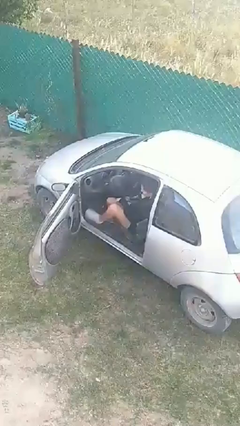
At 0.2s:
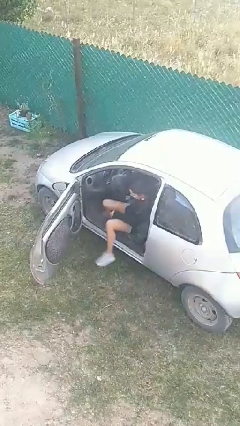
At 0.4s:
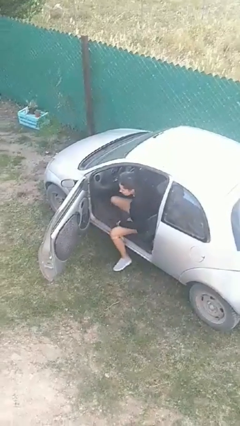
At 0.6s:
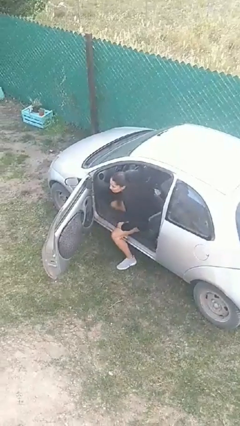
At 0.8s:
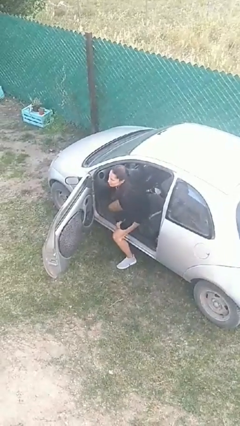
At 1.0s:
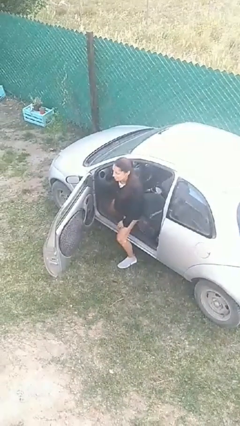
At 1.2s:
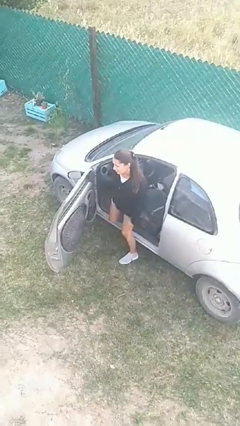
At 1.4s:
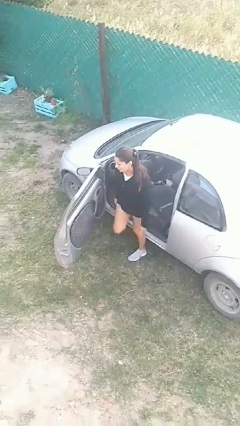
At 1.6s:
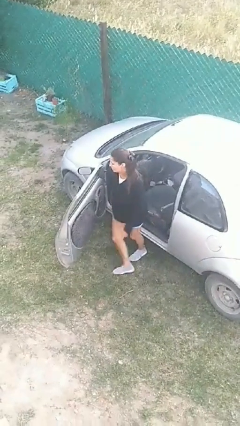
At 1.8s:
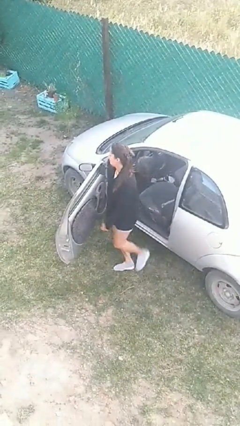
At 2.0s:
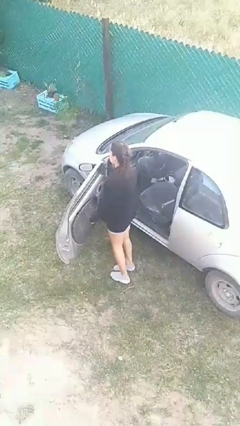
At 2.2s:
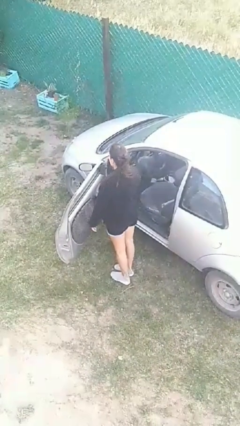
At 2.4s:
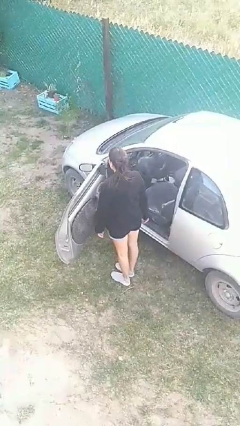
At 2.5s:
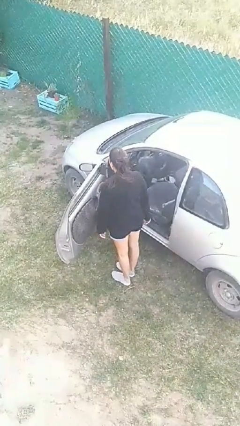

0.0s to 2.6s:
person exits car

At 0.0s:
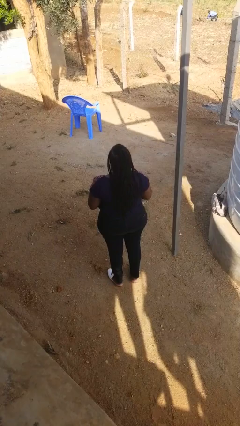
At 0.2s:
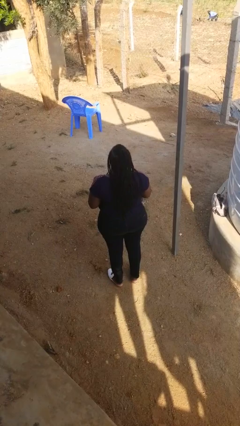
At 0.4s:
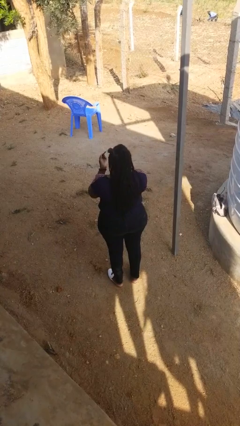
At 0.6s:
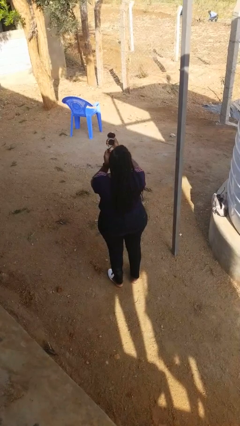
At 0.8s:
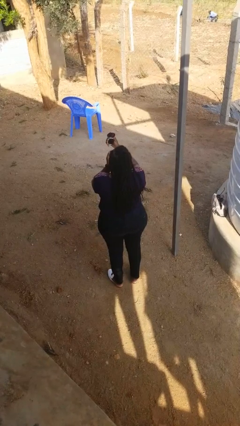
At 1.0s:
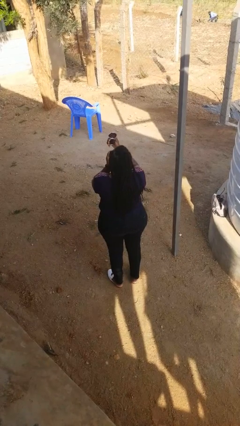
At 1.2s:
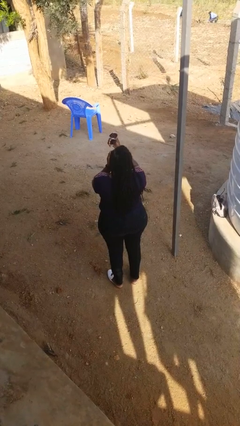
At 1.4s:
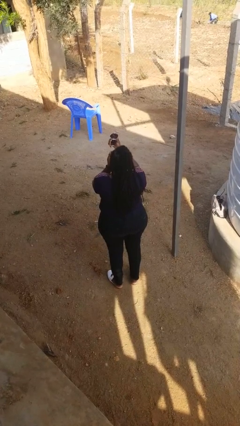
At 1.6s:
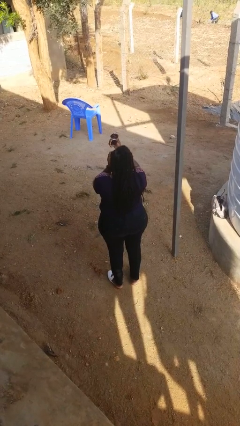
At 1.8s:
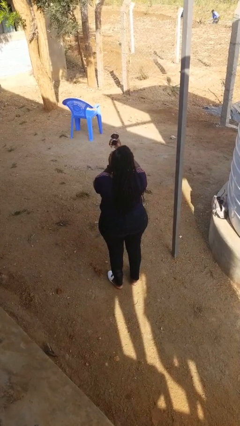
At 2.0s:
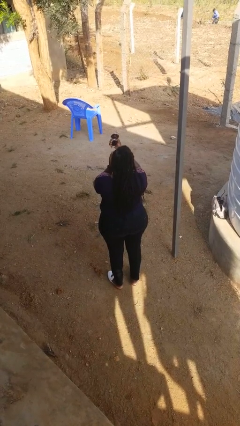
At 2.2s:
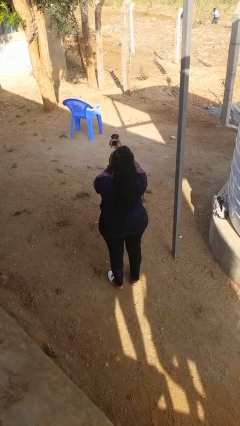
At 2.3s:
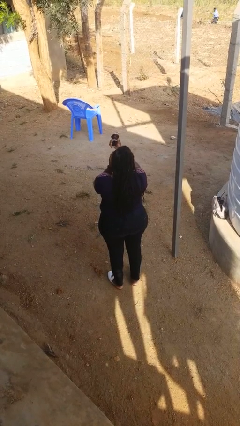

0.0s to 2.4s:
person applies eye makeup

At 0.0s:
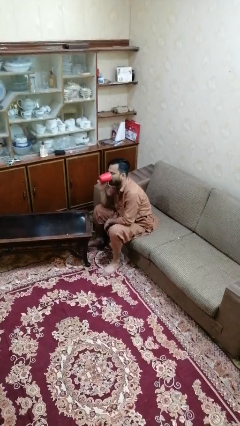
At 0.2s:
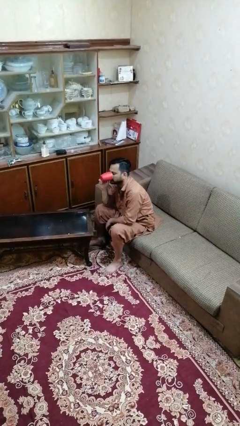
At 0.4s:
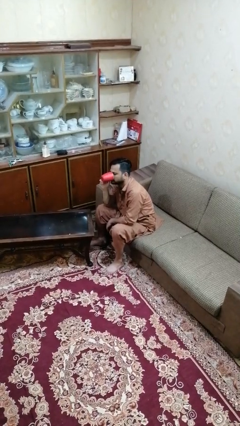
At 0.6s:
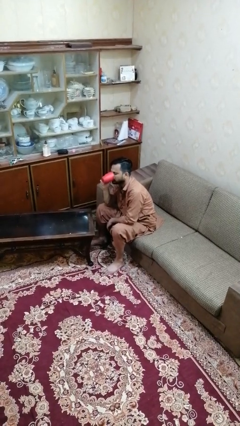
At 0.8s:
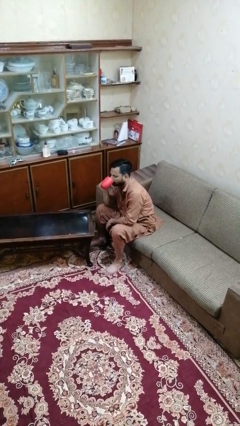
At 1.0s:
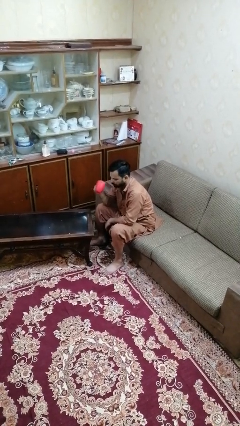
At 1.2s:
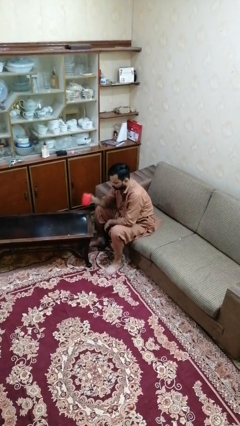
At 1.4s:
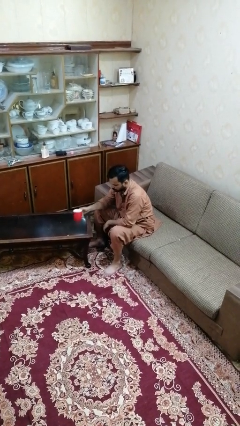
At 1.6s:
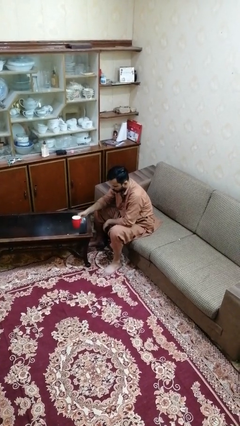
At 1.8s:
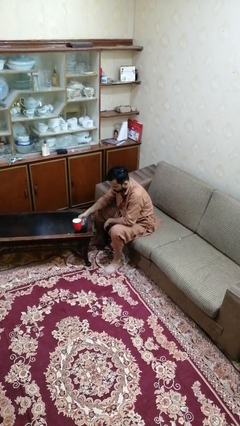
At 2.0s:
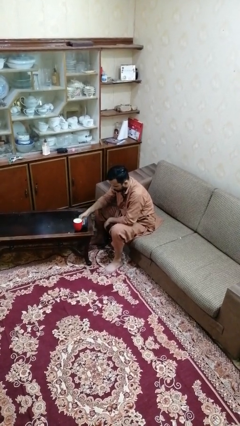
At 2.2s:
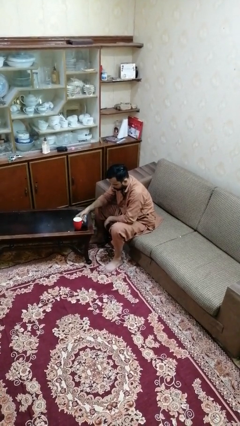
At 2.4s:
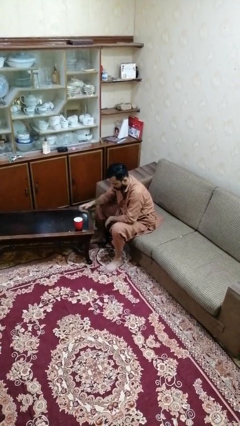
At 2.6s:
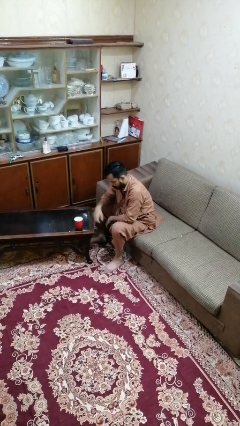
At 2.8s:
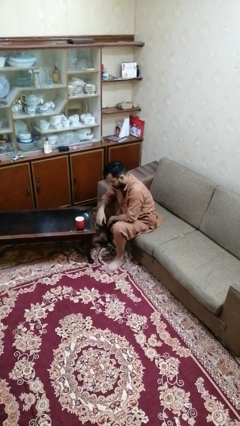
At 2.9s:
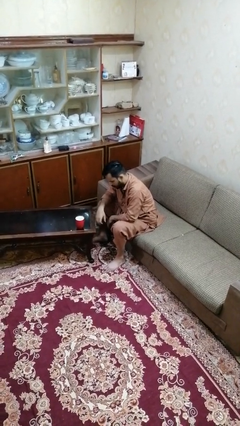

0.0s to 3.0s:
person puts down object on table

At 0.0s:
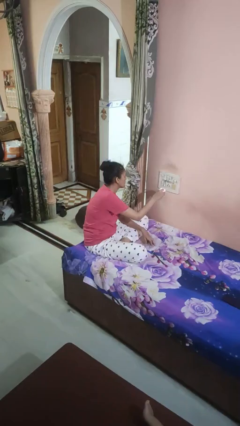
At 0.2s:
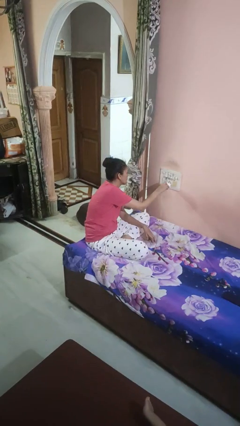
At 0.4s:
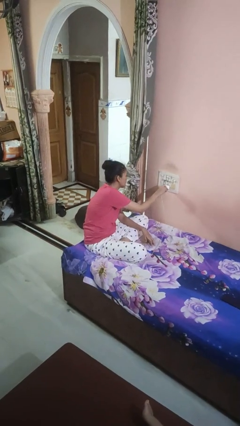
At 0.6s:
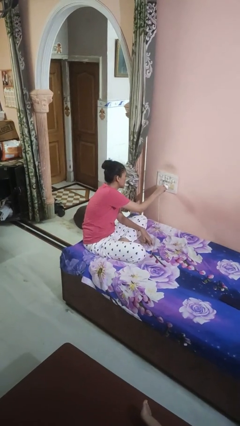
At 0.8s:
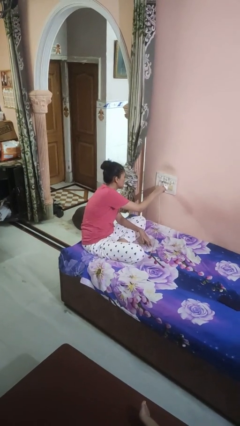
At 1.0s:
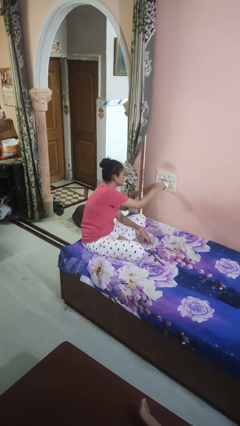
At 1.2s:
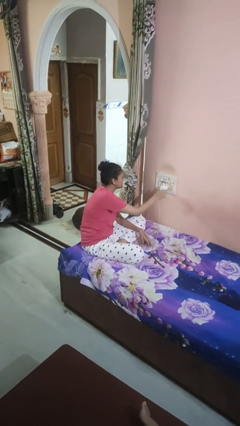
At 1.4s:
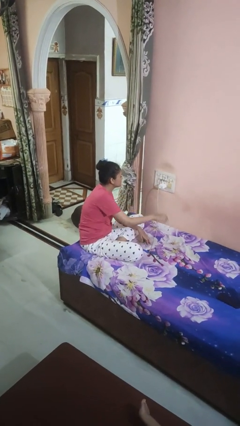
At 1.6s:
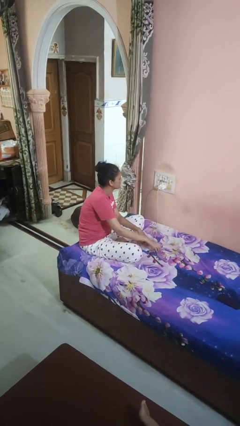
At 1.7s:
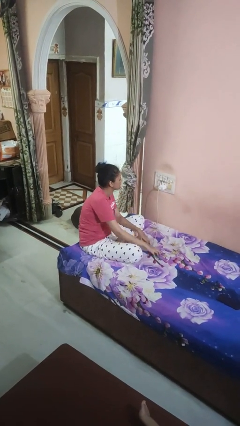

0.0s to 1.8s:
person plugs into electrical socket

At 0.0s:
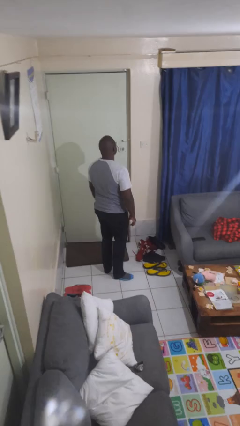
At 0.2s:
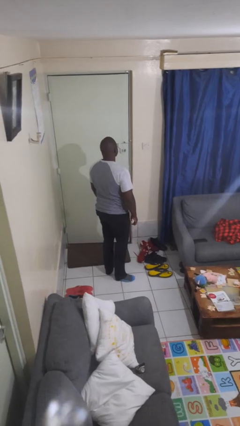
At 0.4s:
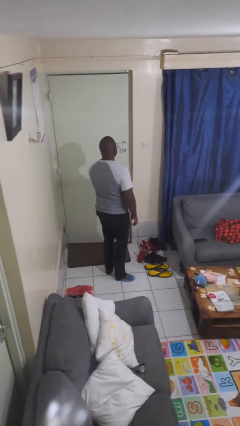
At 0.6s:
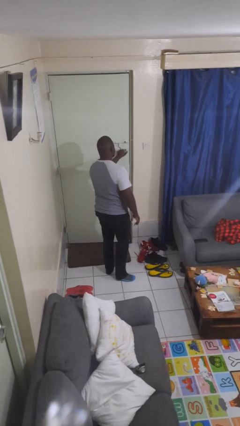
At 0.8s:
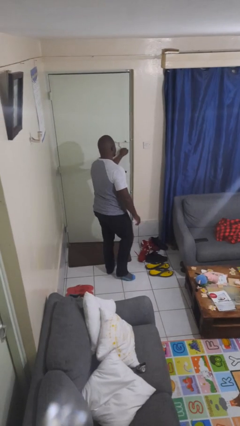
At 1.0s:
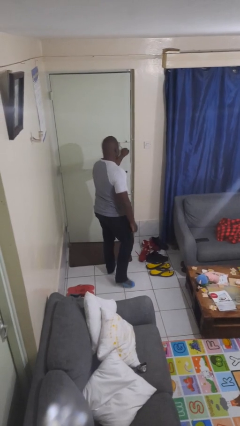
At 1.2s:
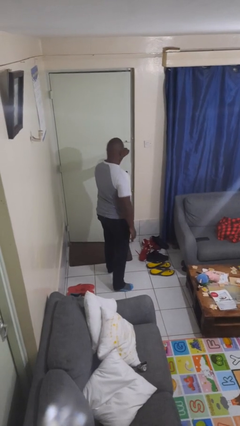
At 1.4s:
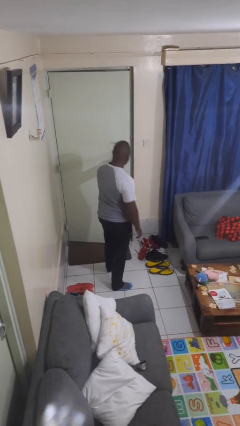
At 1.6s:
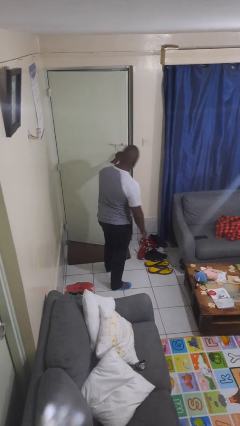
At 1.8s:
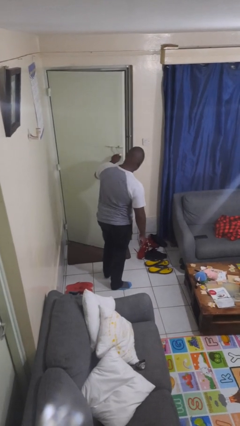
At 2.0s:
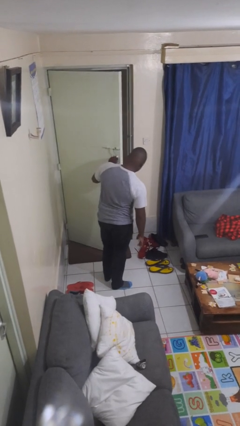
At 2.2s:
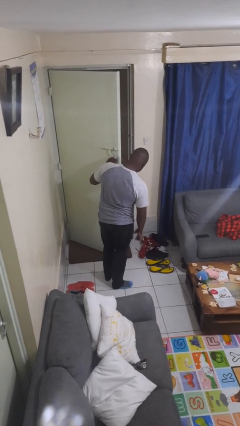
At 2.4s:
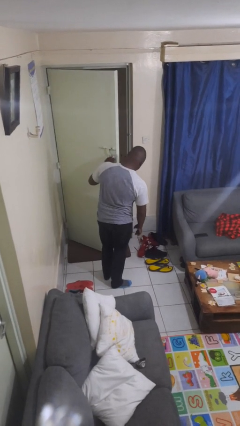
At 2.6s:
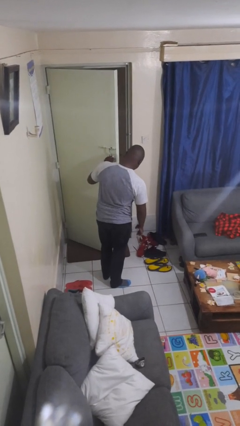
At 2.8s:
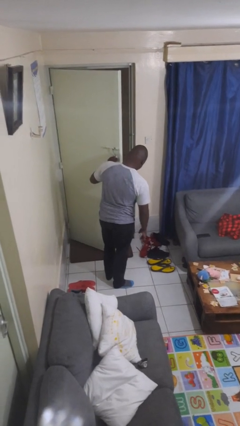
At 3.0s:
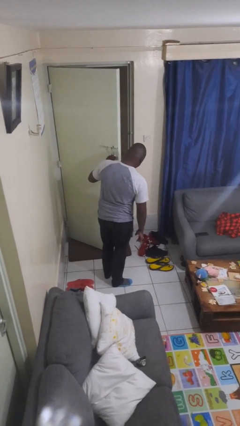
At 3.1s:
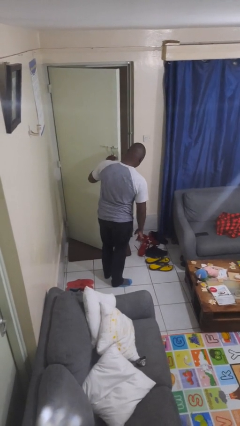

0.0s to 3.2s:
person opens facility door

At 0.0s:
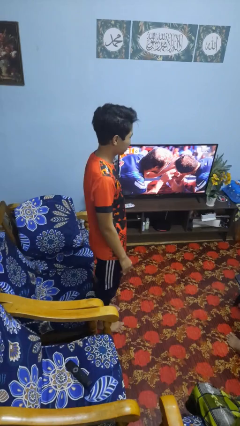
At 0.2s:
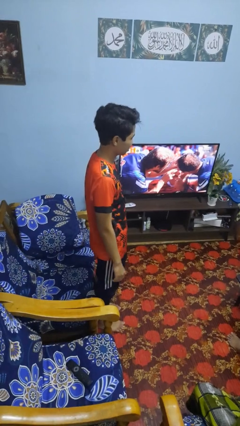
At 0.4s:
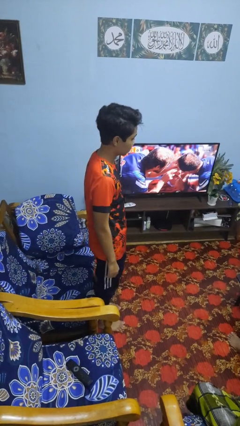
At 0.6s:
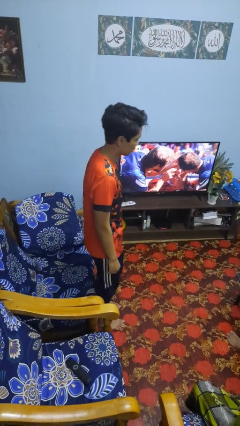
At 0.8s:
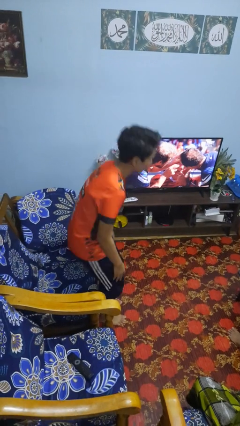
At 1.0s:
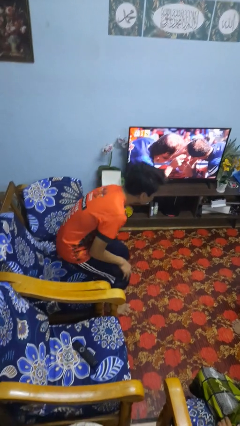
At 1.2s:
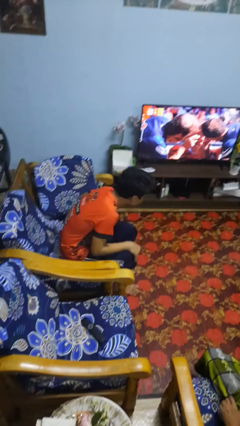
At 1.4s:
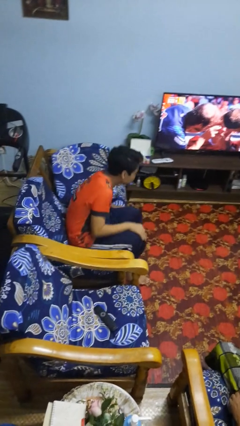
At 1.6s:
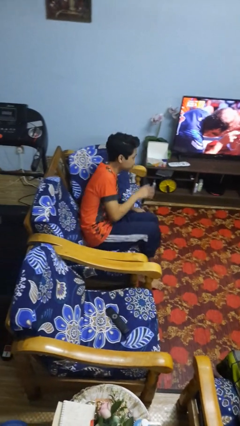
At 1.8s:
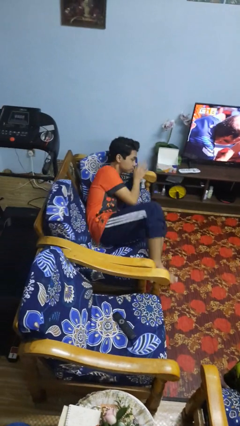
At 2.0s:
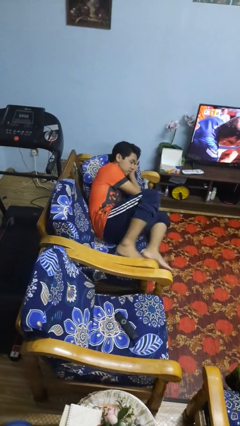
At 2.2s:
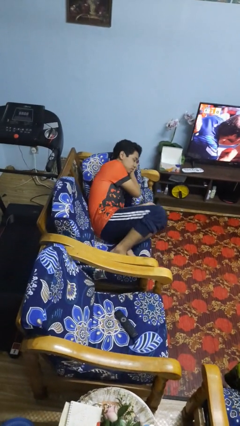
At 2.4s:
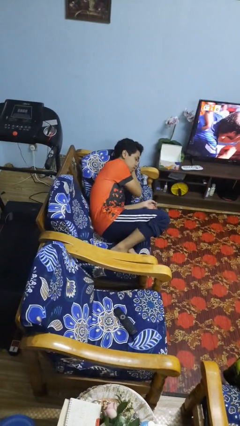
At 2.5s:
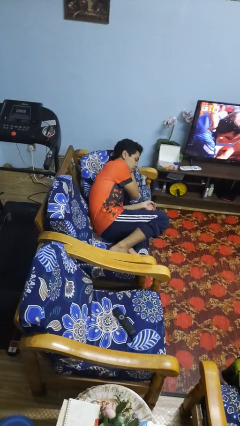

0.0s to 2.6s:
person lies down on couch

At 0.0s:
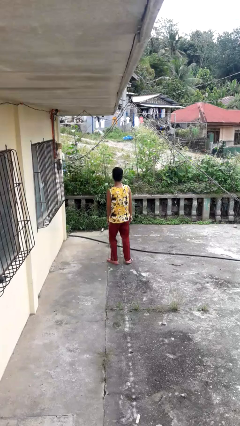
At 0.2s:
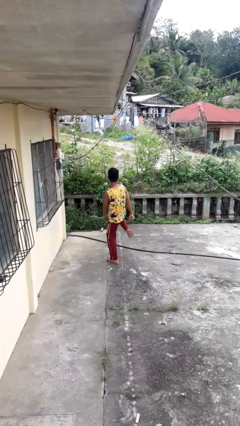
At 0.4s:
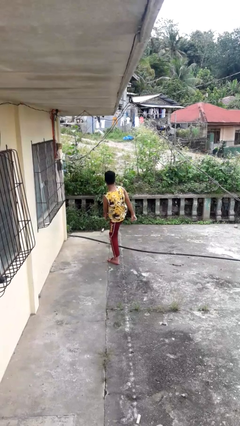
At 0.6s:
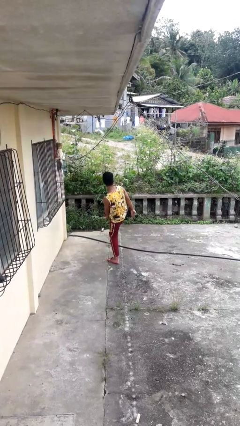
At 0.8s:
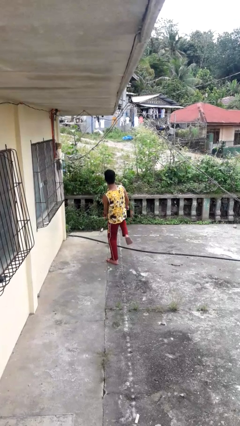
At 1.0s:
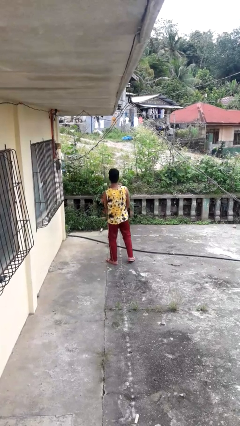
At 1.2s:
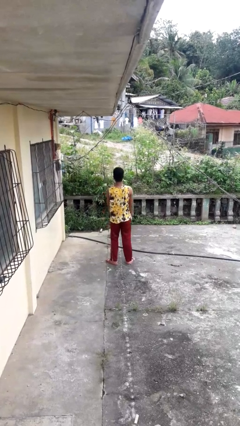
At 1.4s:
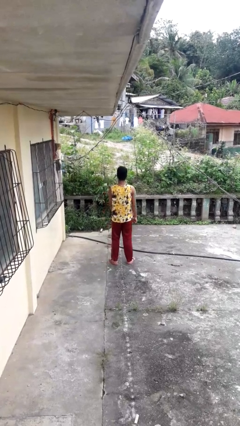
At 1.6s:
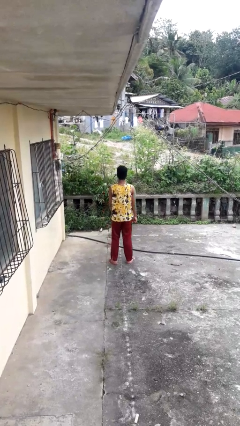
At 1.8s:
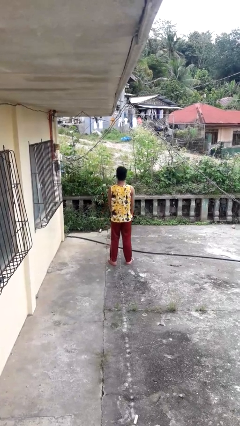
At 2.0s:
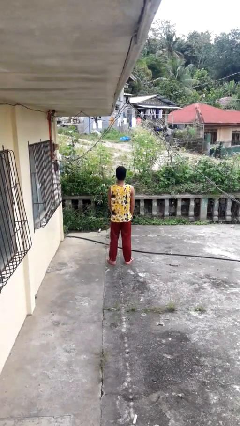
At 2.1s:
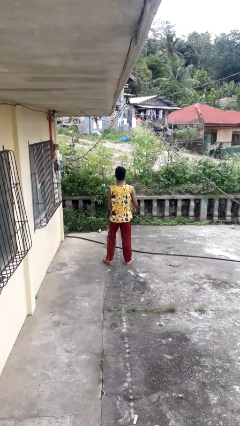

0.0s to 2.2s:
person karate kicks
